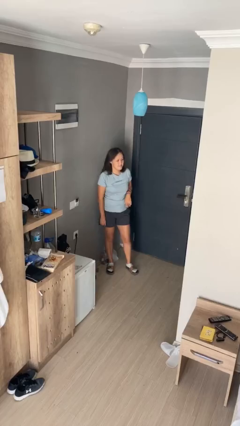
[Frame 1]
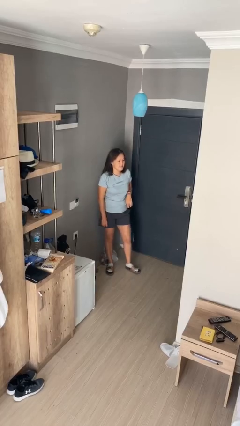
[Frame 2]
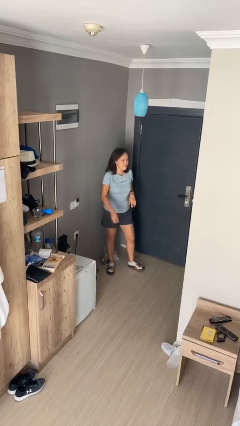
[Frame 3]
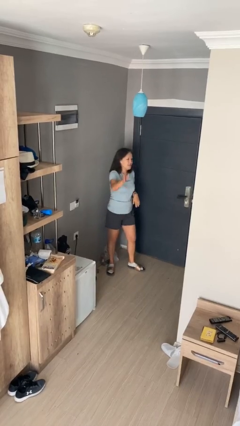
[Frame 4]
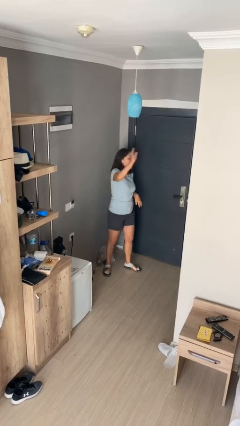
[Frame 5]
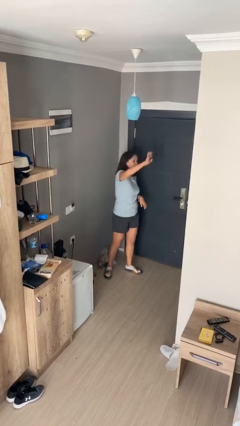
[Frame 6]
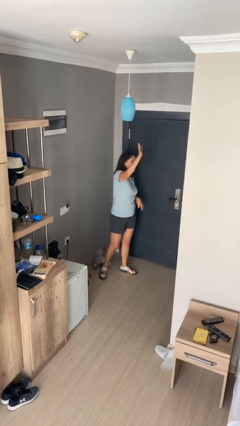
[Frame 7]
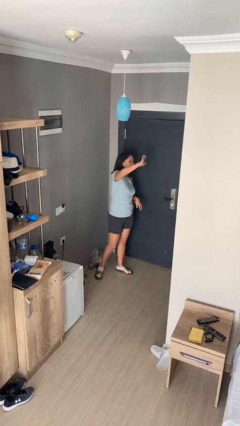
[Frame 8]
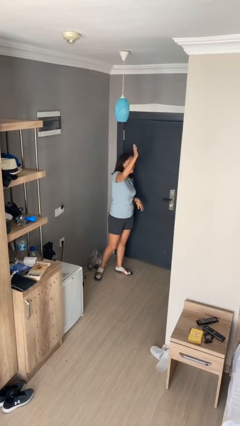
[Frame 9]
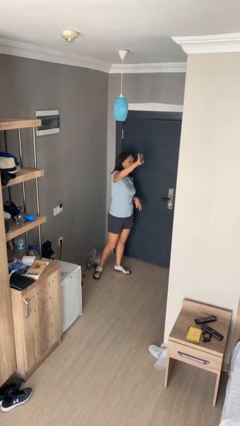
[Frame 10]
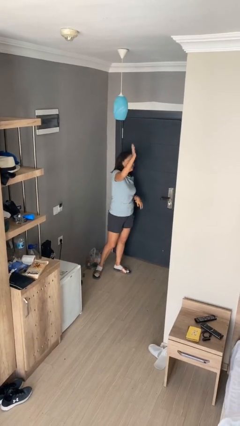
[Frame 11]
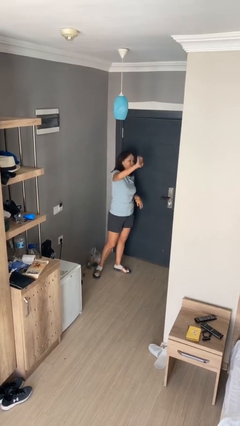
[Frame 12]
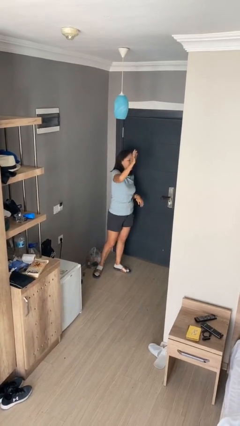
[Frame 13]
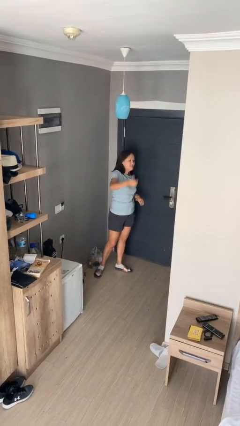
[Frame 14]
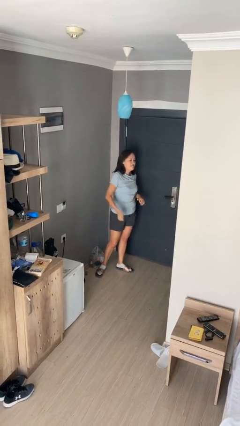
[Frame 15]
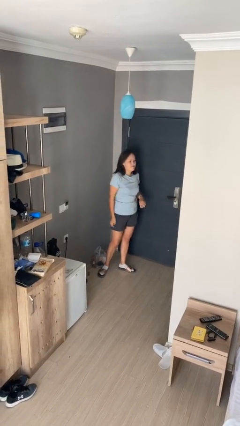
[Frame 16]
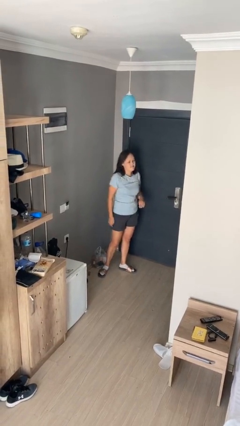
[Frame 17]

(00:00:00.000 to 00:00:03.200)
person waves at person

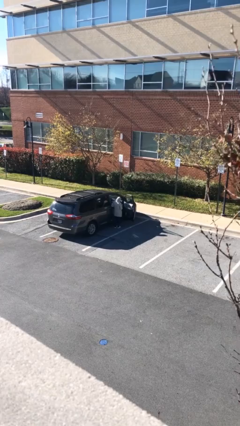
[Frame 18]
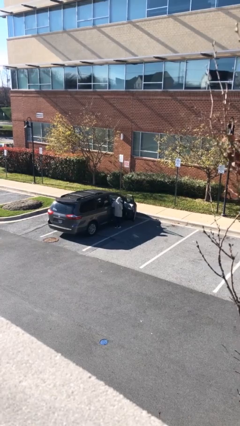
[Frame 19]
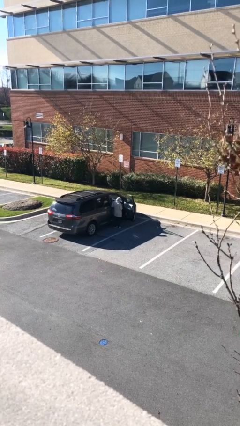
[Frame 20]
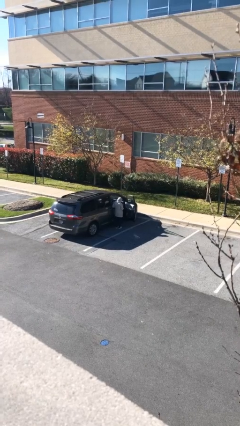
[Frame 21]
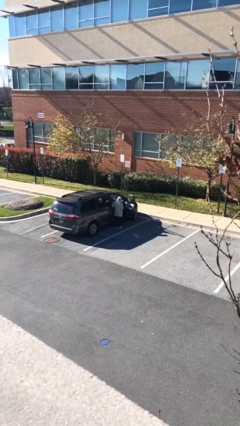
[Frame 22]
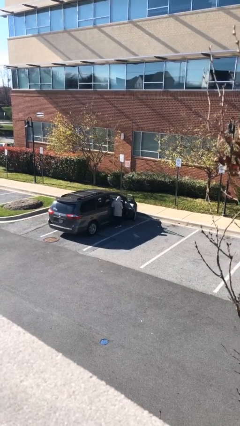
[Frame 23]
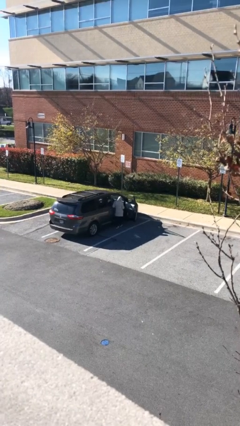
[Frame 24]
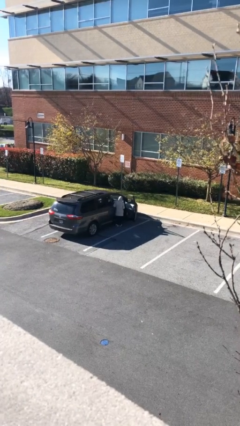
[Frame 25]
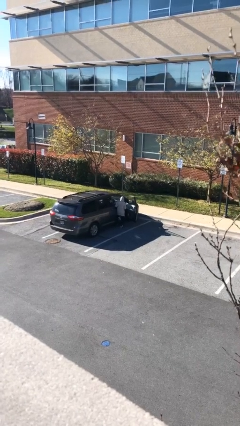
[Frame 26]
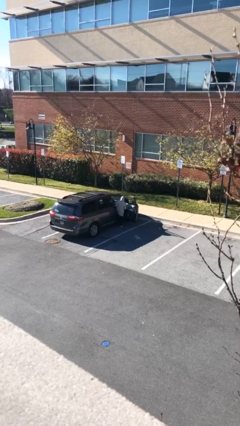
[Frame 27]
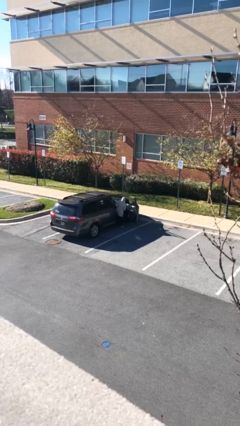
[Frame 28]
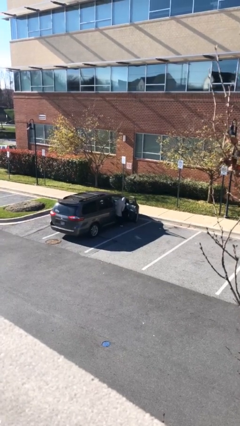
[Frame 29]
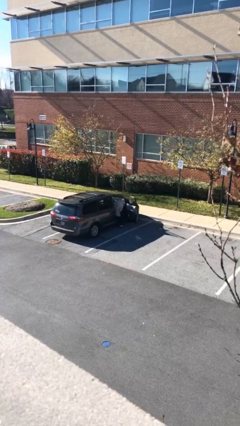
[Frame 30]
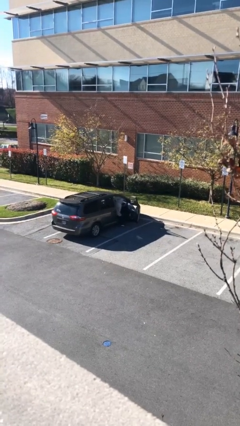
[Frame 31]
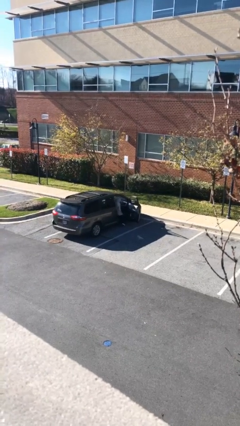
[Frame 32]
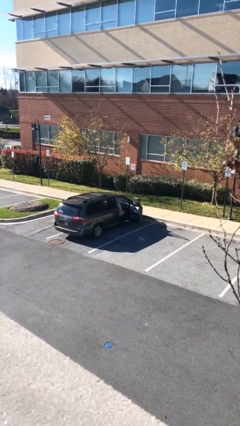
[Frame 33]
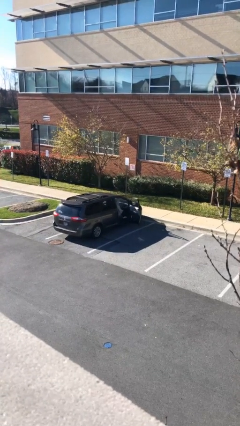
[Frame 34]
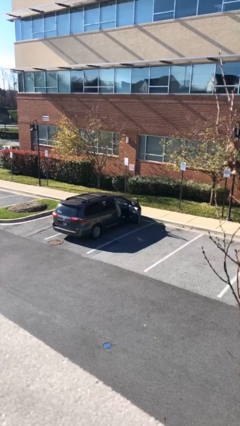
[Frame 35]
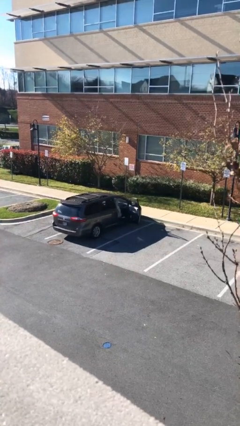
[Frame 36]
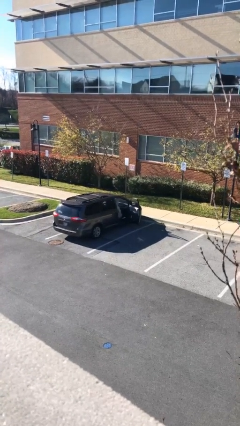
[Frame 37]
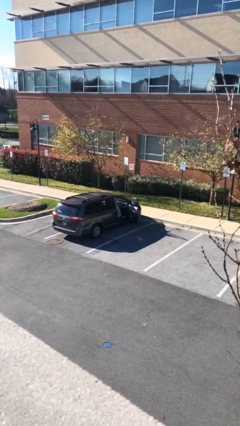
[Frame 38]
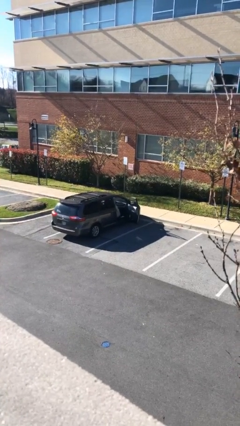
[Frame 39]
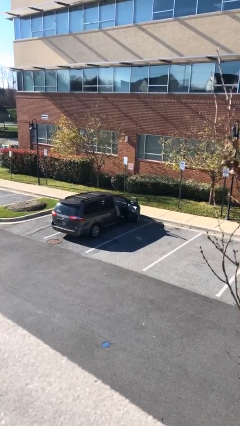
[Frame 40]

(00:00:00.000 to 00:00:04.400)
person enters car

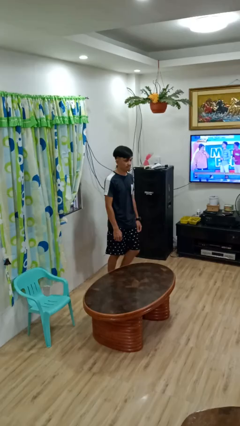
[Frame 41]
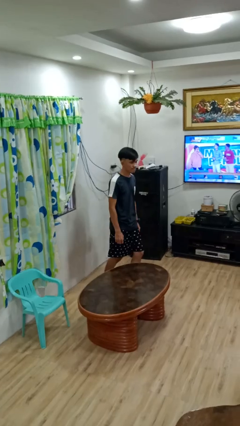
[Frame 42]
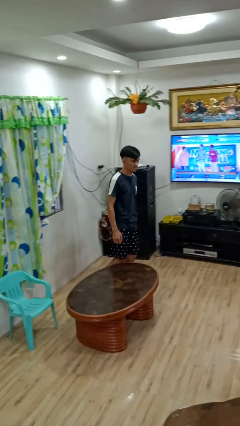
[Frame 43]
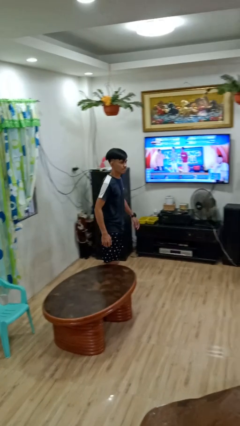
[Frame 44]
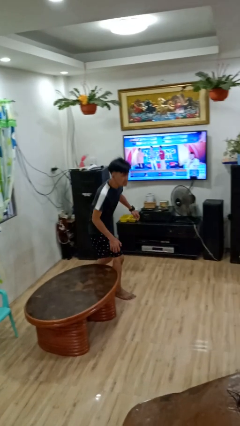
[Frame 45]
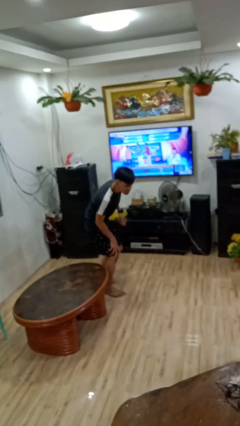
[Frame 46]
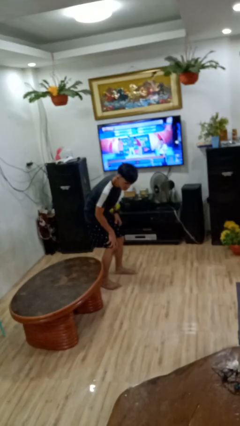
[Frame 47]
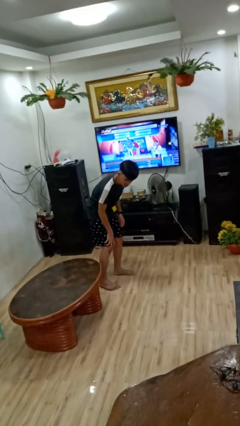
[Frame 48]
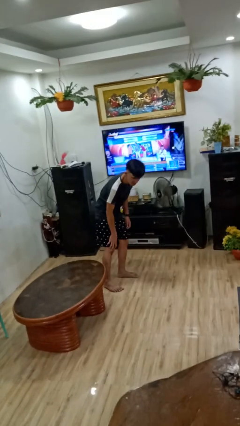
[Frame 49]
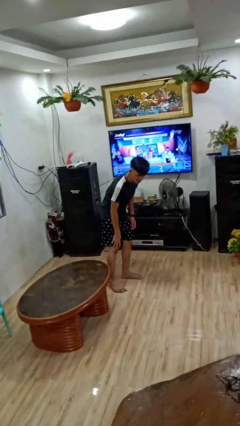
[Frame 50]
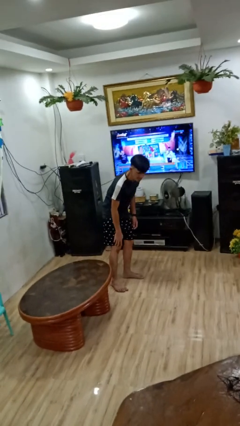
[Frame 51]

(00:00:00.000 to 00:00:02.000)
person bumps into table

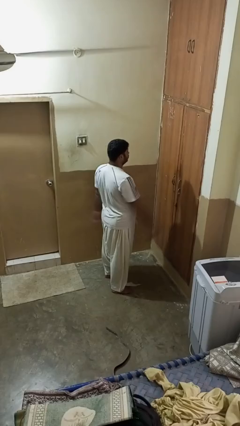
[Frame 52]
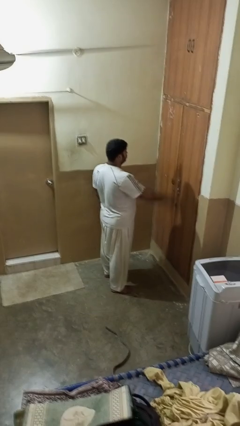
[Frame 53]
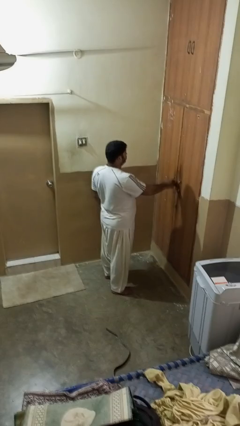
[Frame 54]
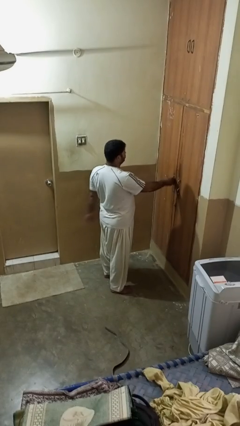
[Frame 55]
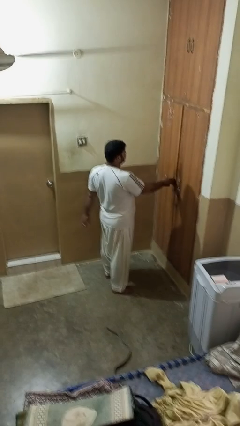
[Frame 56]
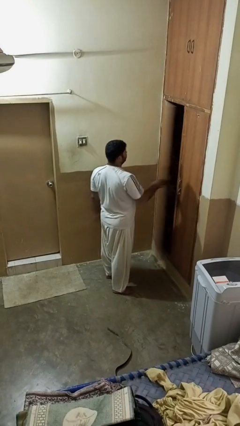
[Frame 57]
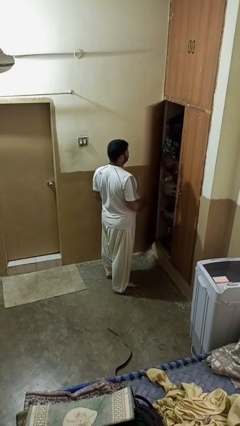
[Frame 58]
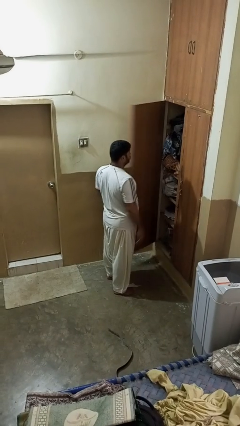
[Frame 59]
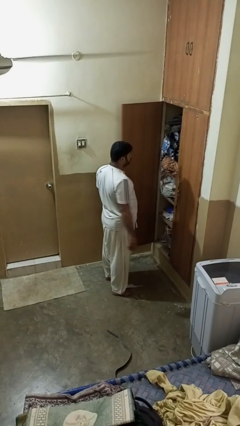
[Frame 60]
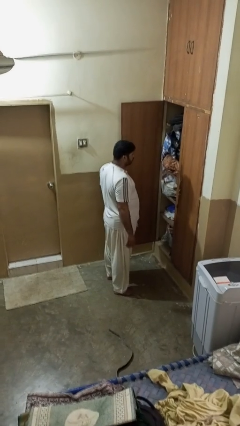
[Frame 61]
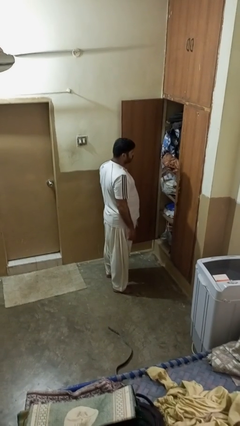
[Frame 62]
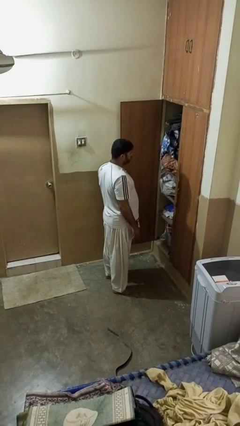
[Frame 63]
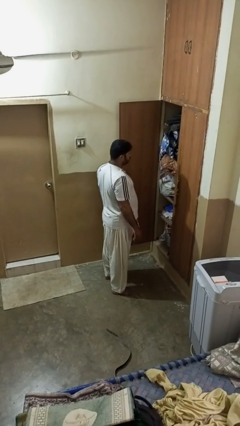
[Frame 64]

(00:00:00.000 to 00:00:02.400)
person opens closet door

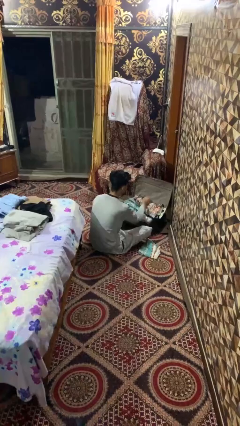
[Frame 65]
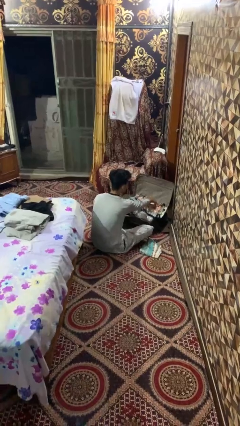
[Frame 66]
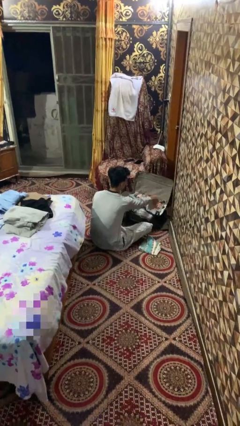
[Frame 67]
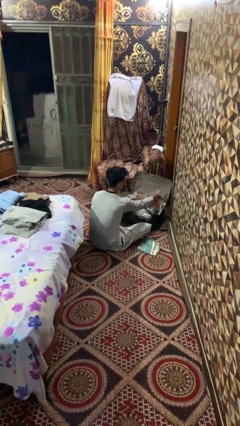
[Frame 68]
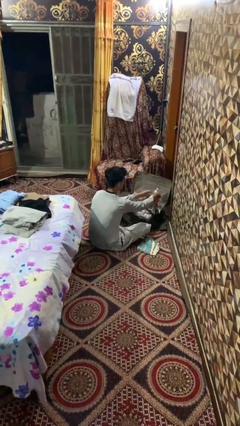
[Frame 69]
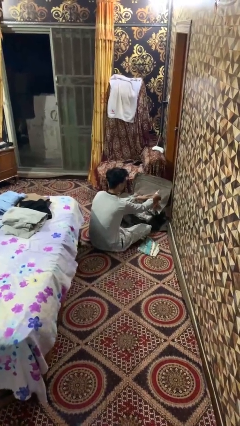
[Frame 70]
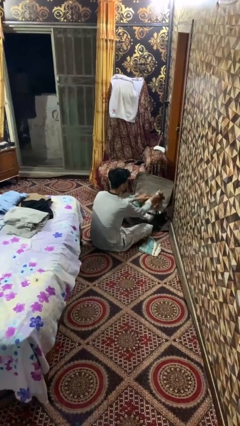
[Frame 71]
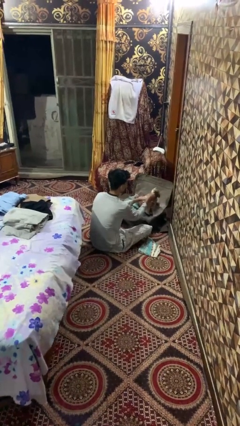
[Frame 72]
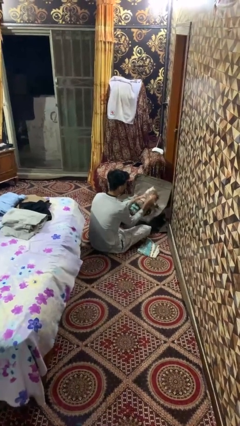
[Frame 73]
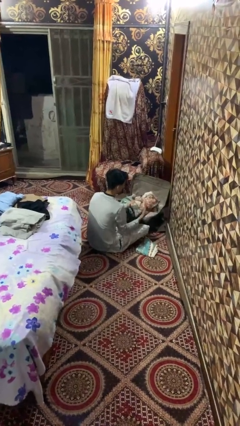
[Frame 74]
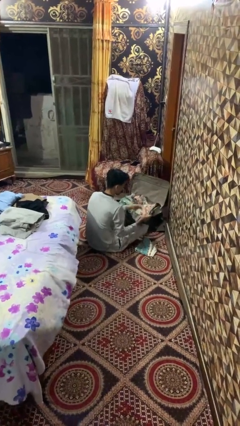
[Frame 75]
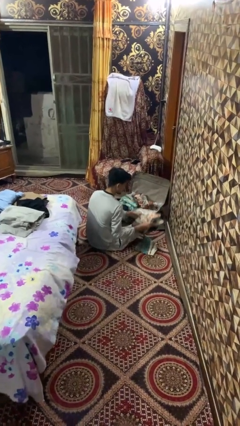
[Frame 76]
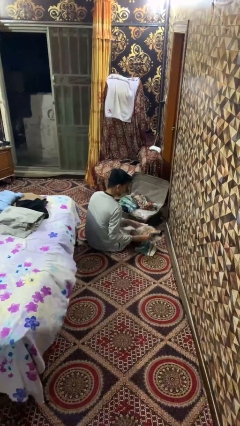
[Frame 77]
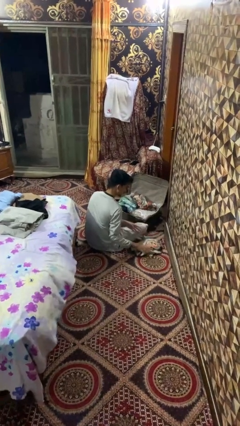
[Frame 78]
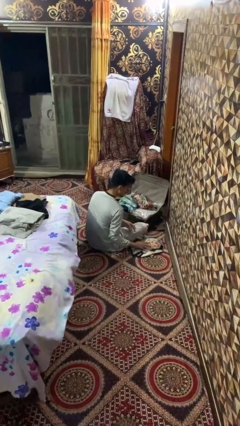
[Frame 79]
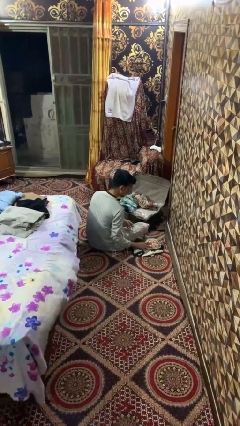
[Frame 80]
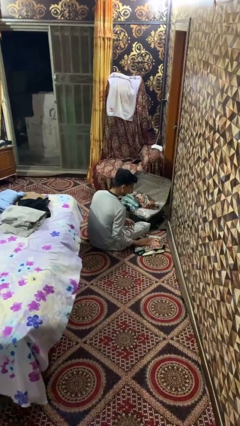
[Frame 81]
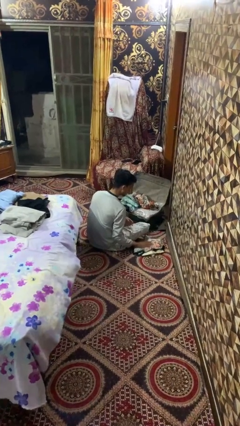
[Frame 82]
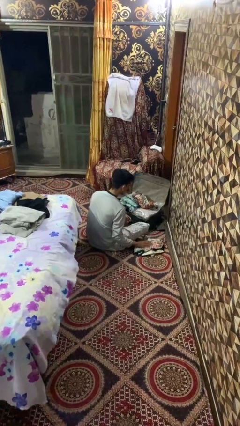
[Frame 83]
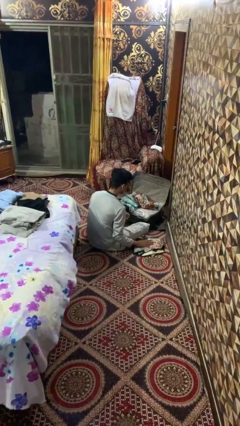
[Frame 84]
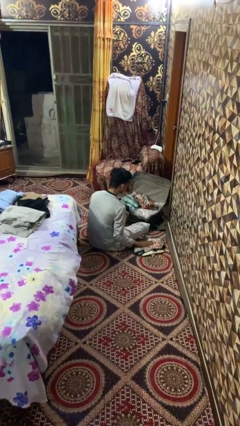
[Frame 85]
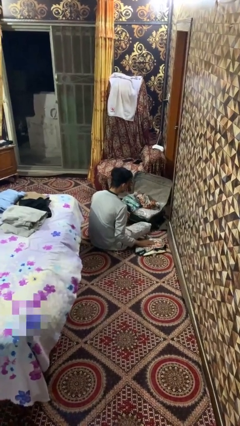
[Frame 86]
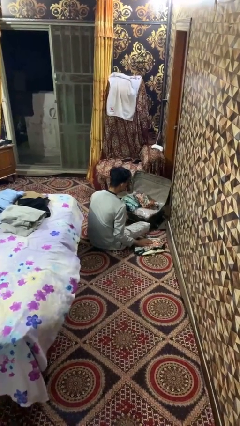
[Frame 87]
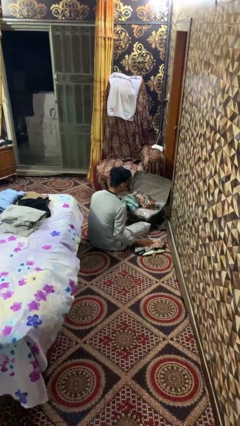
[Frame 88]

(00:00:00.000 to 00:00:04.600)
person unloads clothes from suitcase

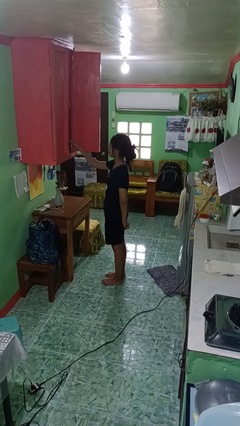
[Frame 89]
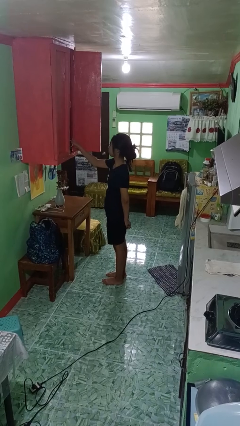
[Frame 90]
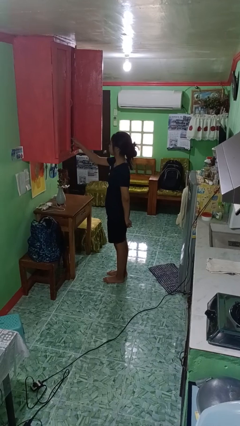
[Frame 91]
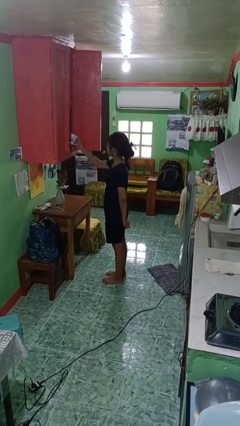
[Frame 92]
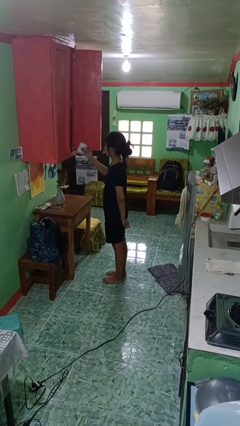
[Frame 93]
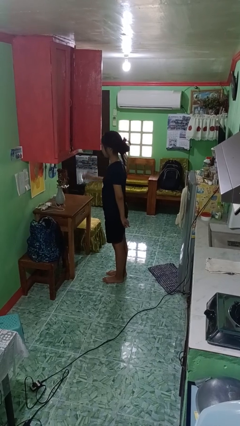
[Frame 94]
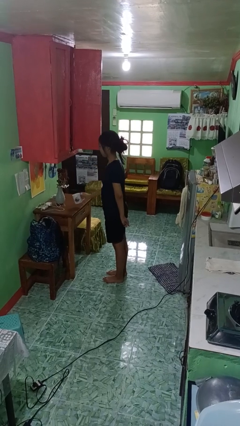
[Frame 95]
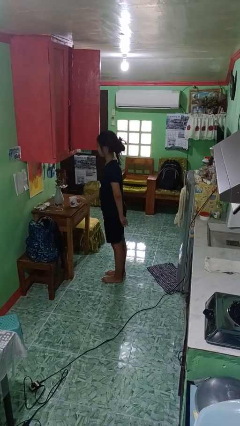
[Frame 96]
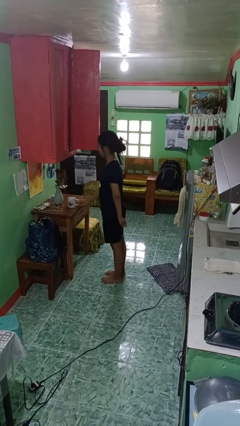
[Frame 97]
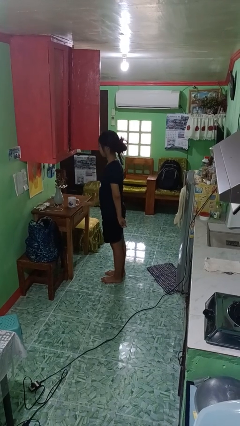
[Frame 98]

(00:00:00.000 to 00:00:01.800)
person takes object from cabinet
